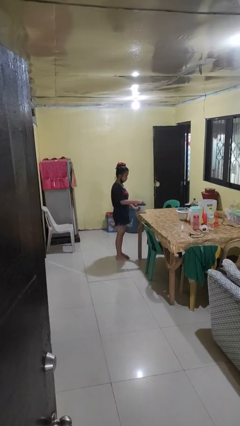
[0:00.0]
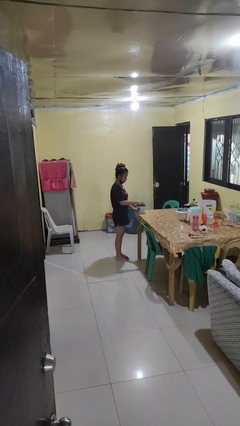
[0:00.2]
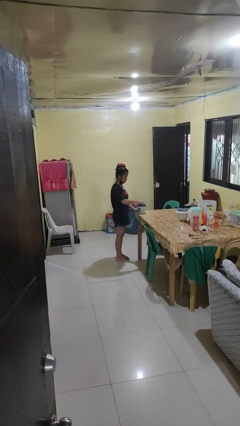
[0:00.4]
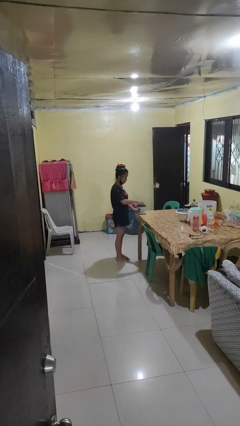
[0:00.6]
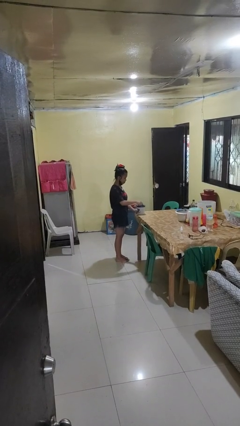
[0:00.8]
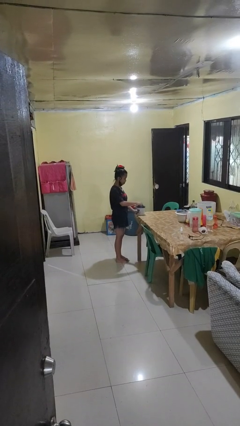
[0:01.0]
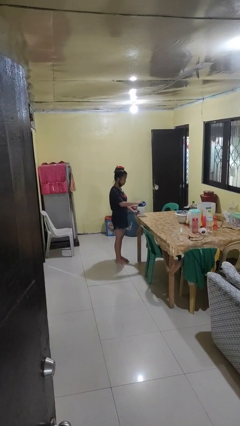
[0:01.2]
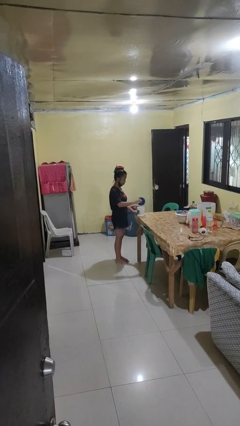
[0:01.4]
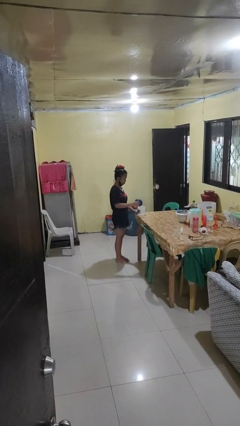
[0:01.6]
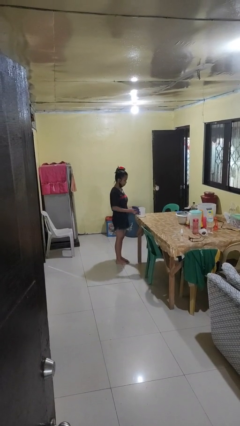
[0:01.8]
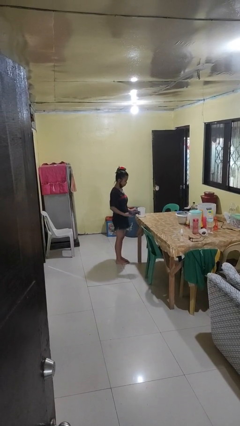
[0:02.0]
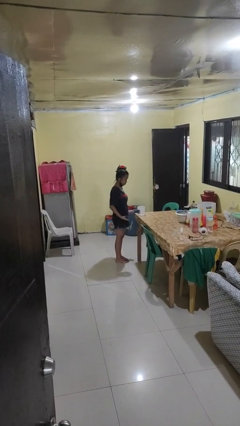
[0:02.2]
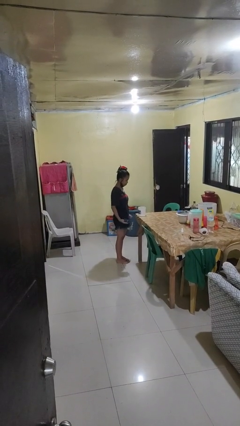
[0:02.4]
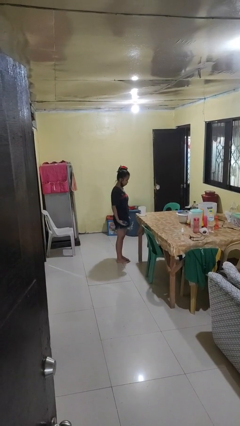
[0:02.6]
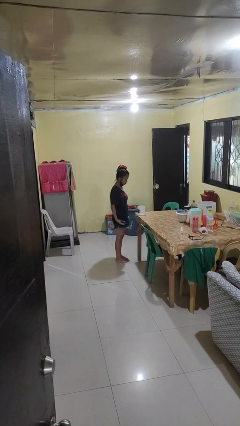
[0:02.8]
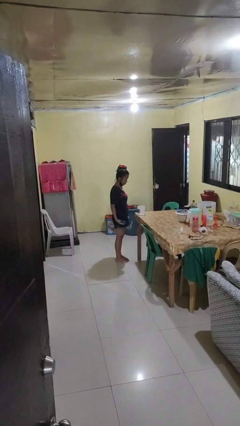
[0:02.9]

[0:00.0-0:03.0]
person opens jar

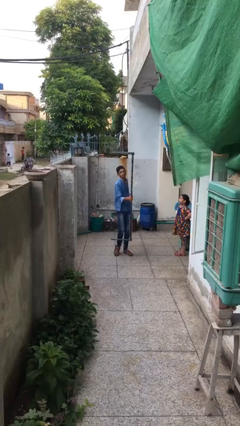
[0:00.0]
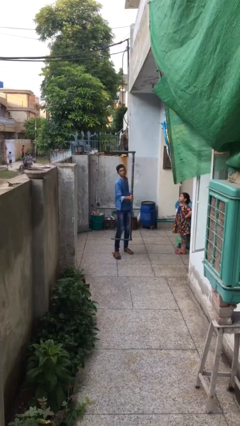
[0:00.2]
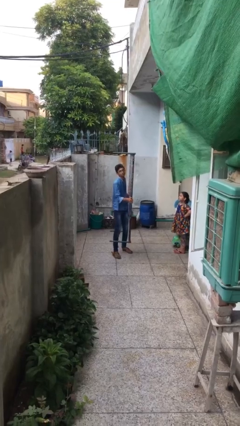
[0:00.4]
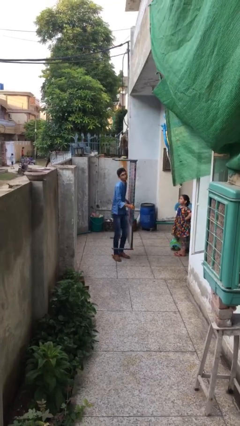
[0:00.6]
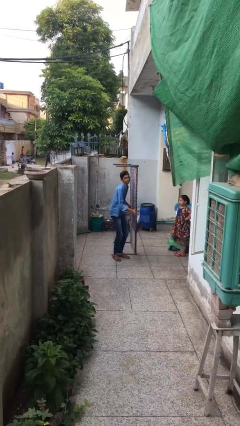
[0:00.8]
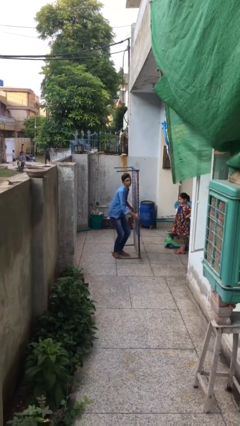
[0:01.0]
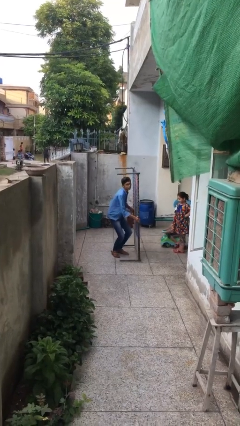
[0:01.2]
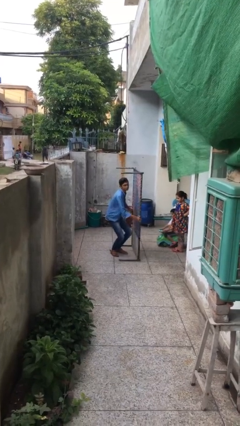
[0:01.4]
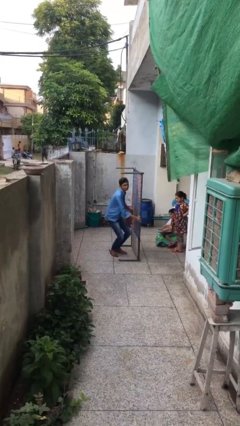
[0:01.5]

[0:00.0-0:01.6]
person puts down object on floor

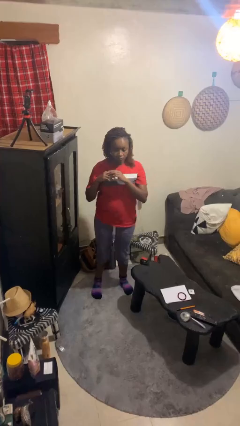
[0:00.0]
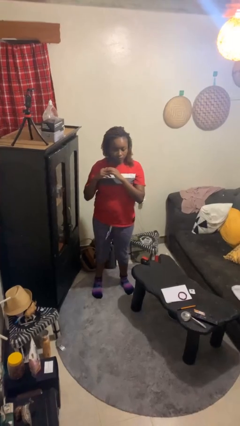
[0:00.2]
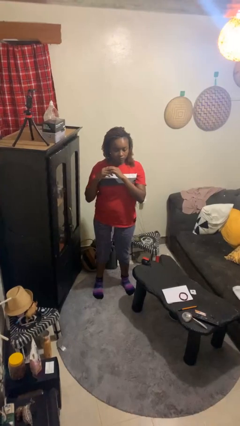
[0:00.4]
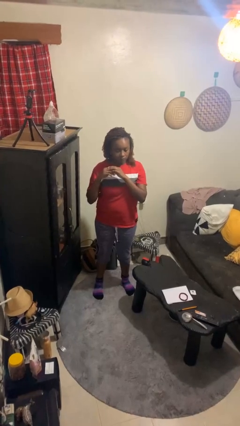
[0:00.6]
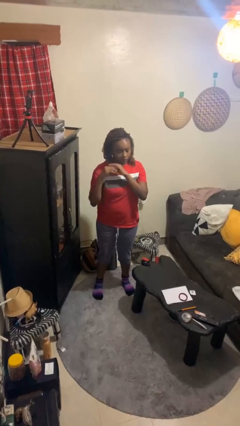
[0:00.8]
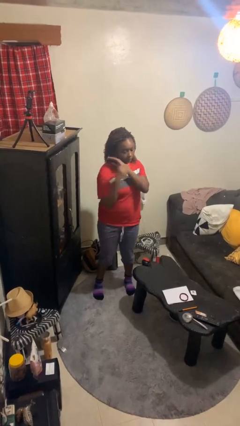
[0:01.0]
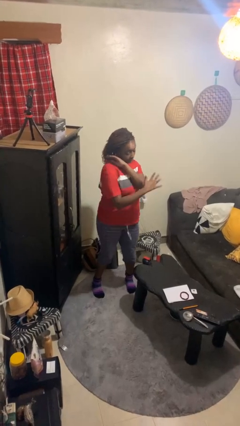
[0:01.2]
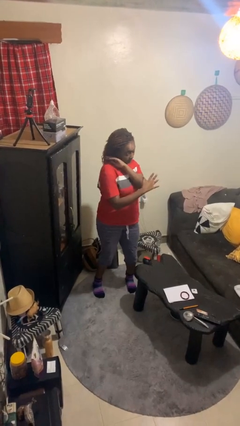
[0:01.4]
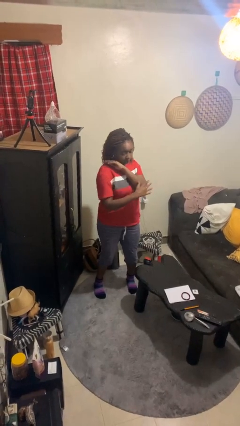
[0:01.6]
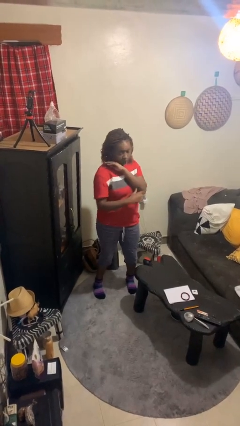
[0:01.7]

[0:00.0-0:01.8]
person karate chop

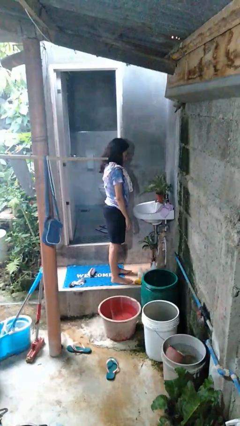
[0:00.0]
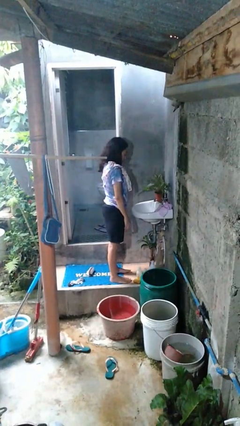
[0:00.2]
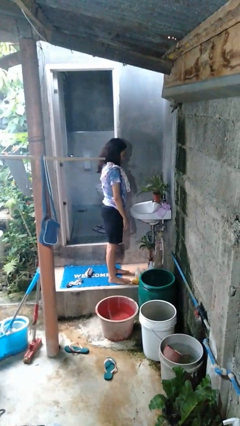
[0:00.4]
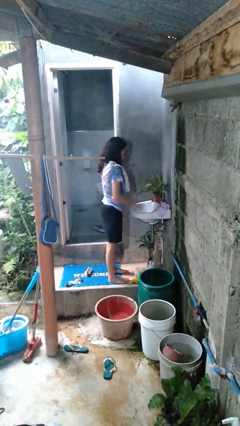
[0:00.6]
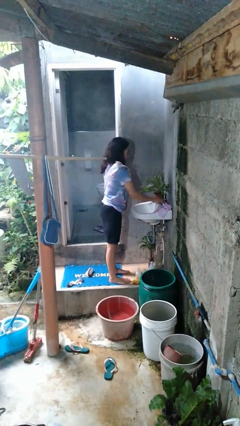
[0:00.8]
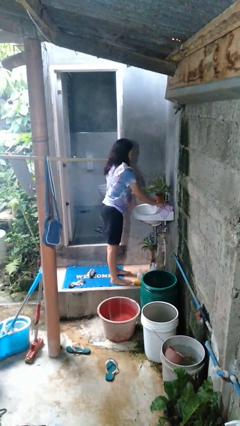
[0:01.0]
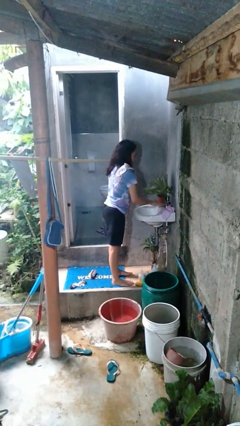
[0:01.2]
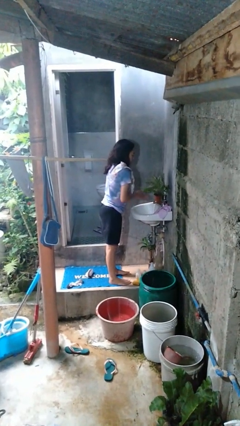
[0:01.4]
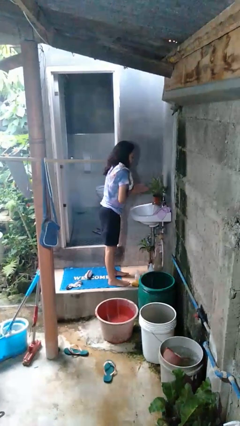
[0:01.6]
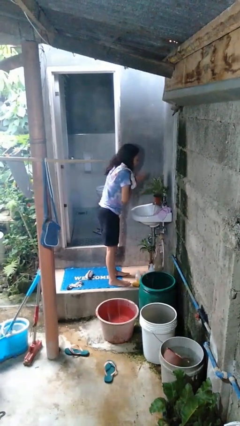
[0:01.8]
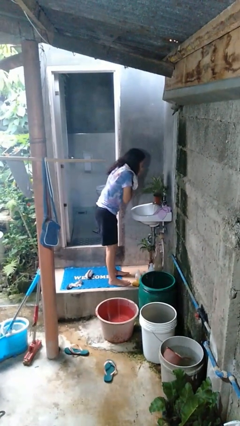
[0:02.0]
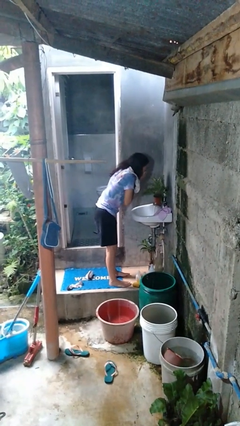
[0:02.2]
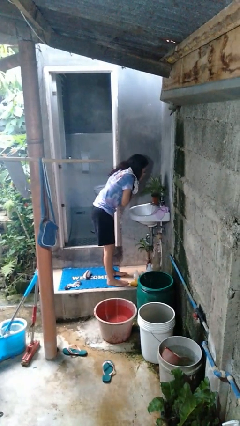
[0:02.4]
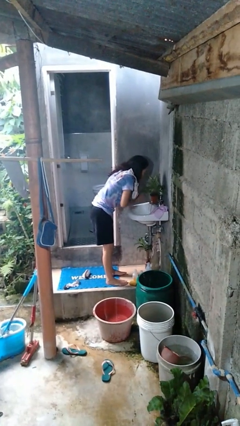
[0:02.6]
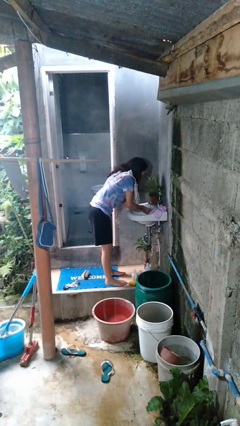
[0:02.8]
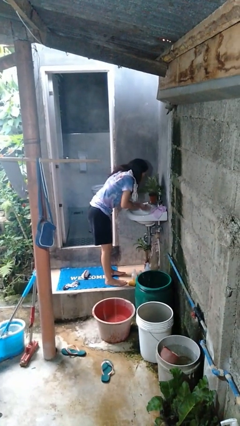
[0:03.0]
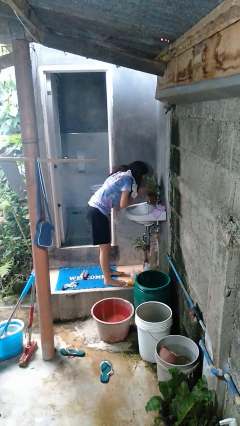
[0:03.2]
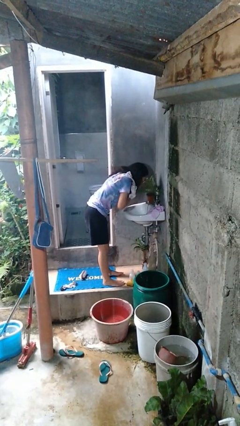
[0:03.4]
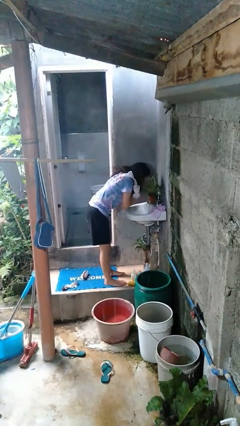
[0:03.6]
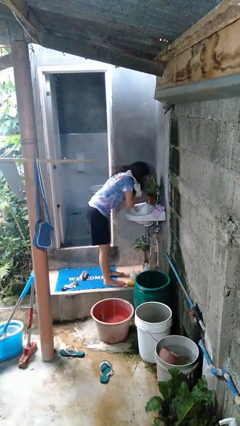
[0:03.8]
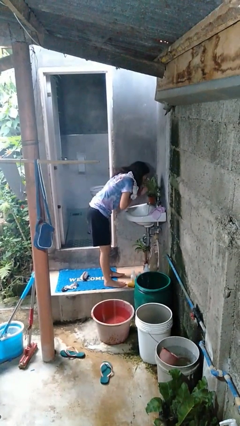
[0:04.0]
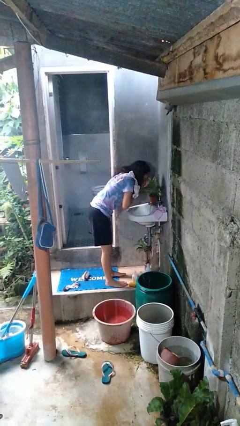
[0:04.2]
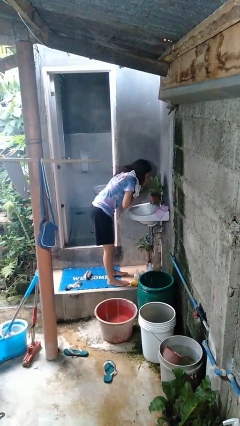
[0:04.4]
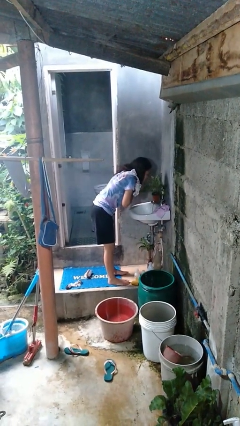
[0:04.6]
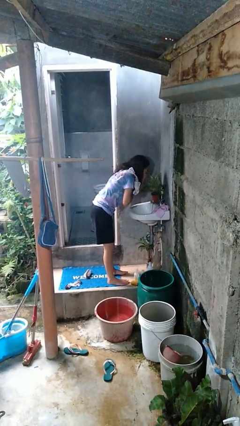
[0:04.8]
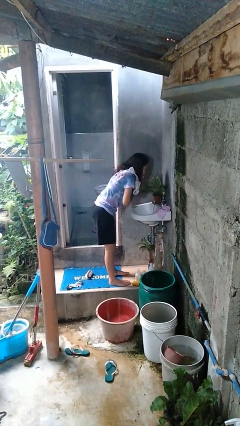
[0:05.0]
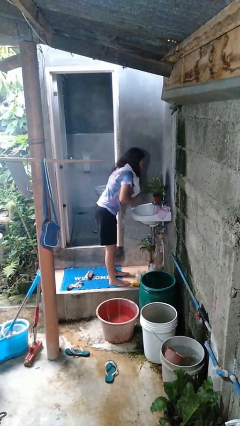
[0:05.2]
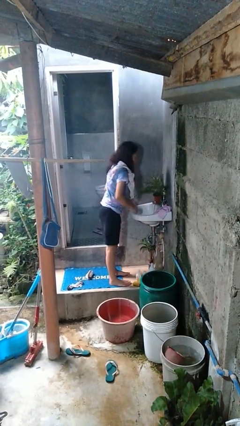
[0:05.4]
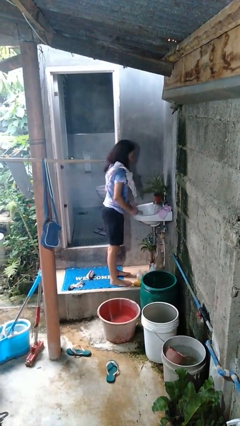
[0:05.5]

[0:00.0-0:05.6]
person washes face

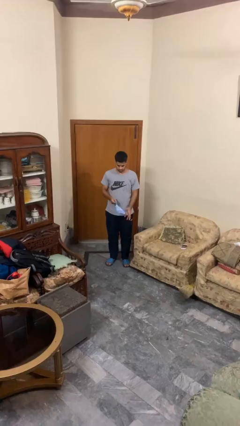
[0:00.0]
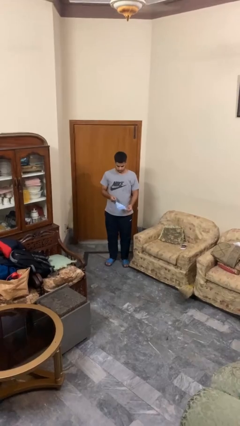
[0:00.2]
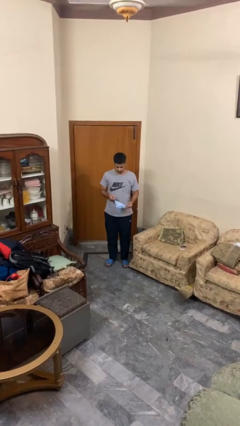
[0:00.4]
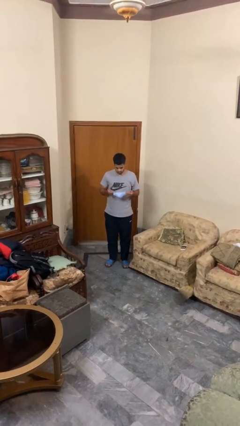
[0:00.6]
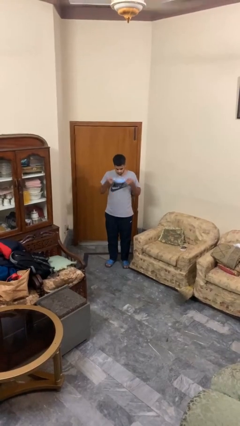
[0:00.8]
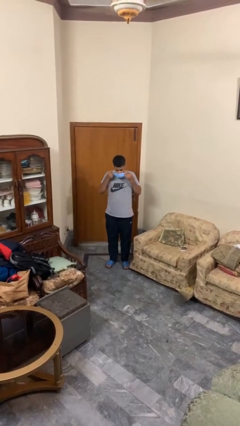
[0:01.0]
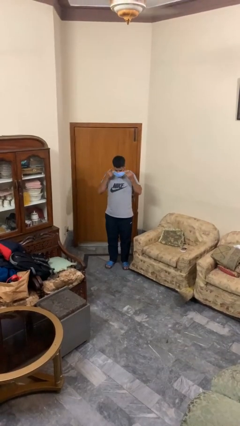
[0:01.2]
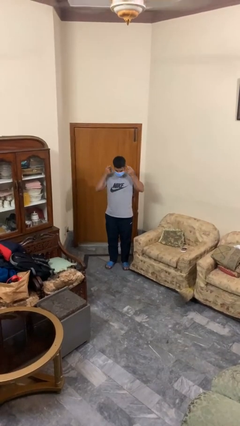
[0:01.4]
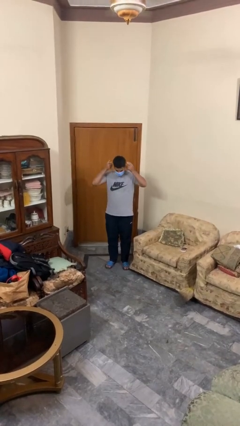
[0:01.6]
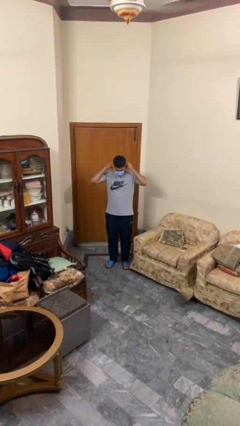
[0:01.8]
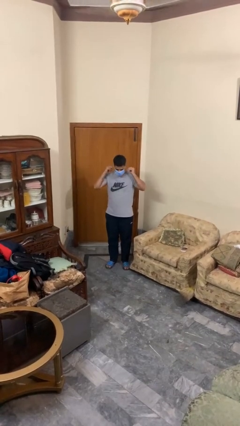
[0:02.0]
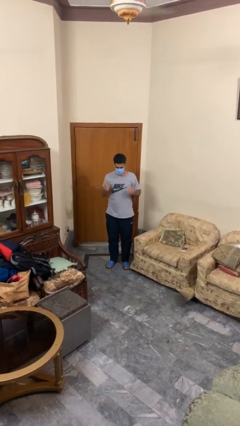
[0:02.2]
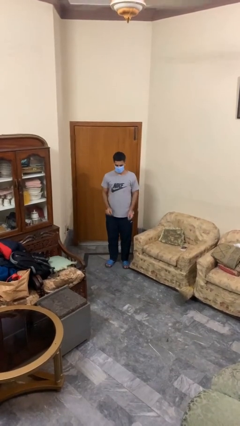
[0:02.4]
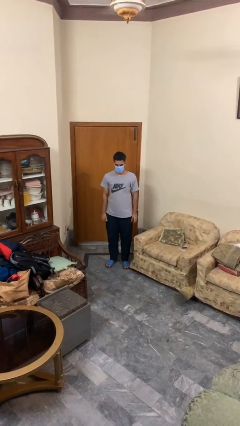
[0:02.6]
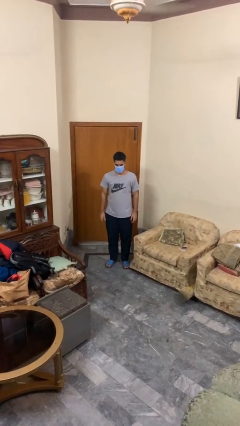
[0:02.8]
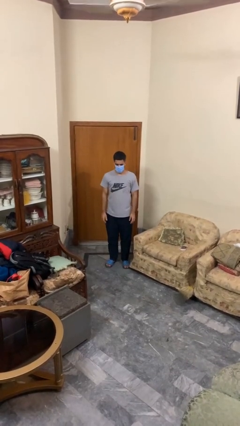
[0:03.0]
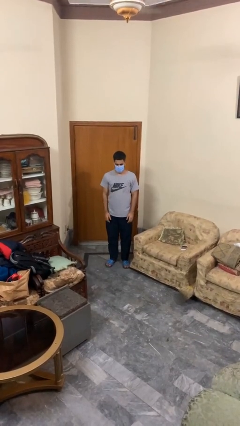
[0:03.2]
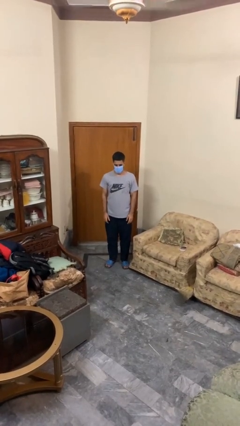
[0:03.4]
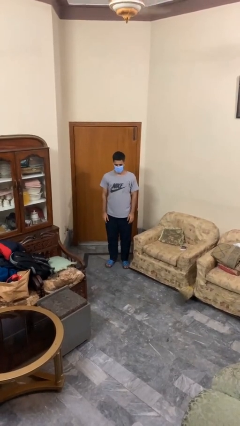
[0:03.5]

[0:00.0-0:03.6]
person puts on facemask

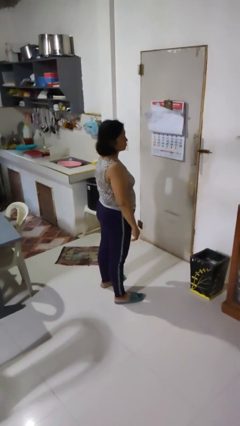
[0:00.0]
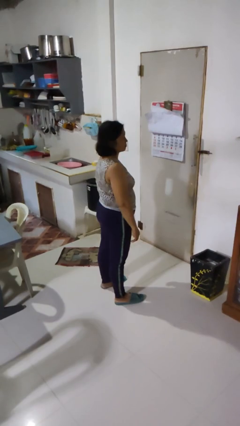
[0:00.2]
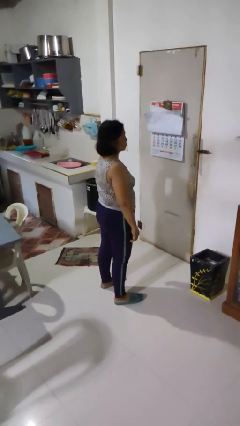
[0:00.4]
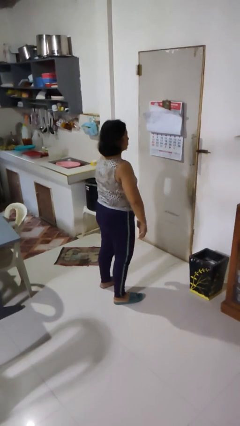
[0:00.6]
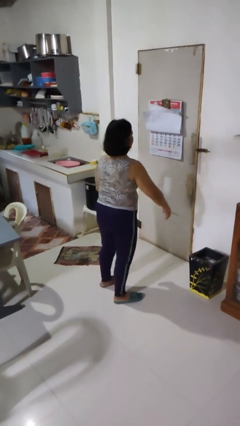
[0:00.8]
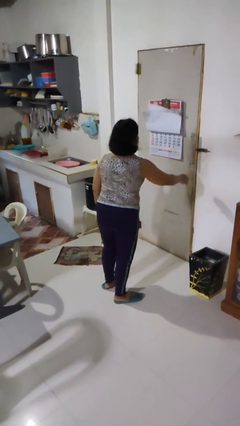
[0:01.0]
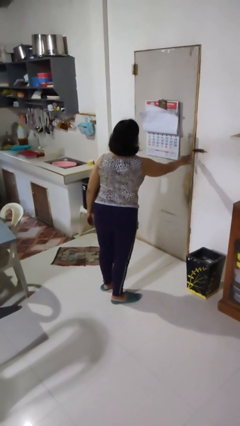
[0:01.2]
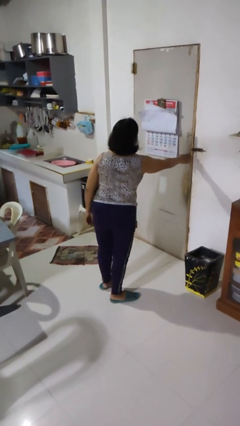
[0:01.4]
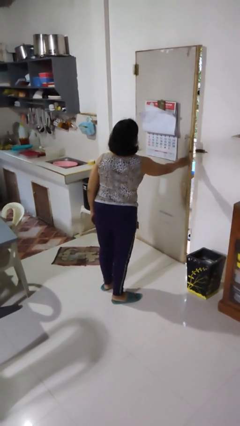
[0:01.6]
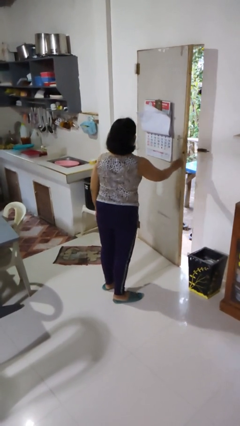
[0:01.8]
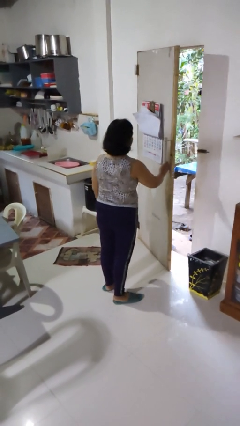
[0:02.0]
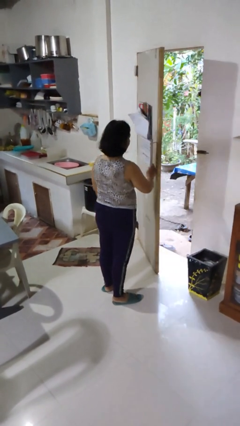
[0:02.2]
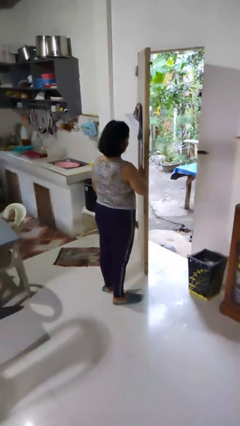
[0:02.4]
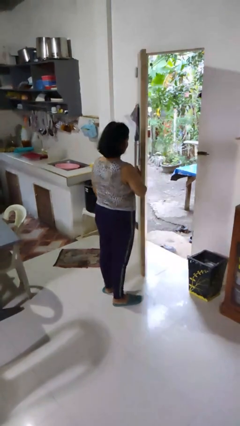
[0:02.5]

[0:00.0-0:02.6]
person opens facility door
